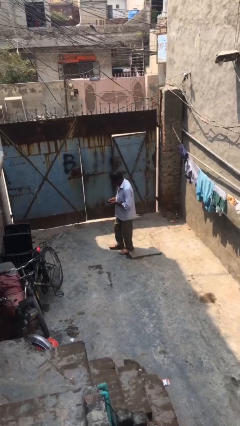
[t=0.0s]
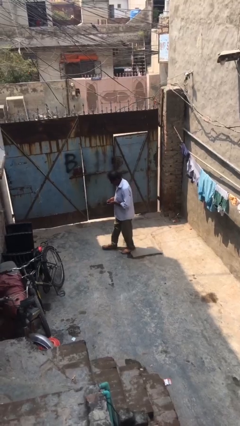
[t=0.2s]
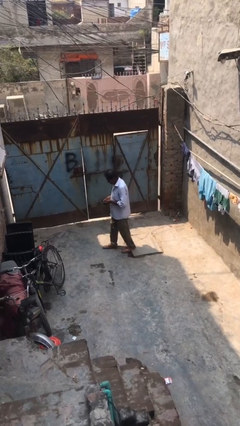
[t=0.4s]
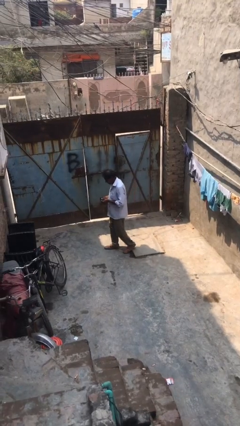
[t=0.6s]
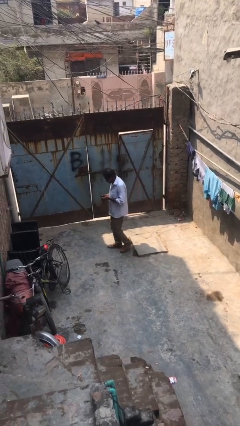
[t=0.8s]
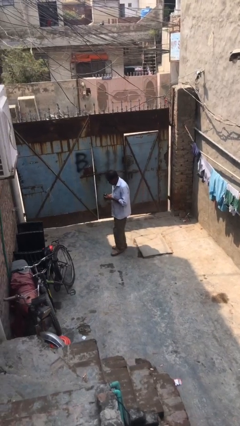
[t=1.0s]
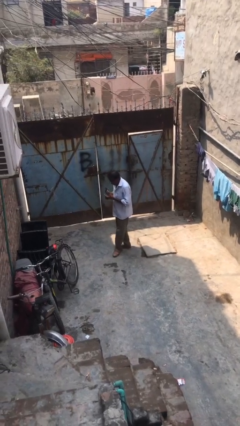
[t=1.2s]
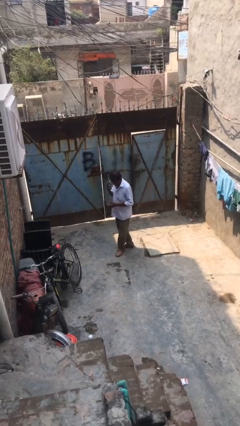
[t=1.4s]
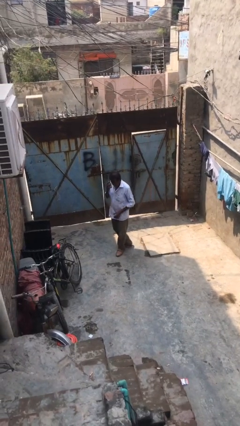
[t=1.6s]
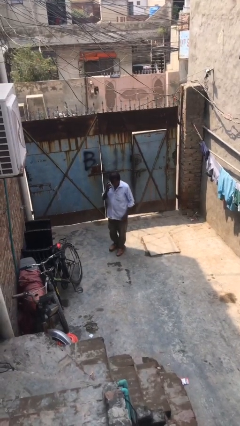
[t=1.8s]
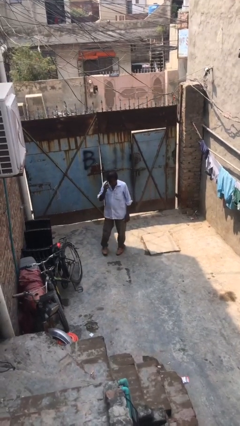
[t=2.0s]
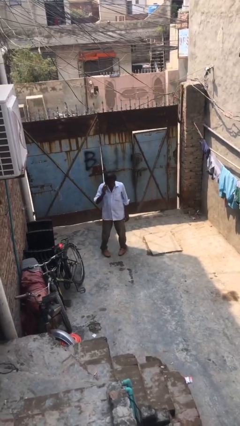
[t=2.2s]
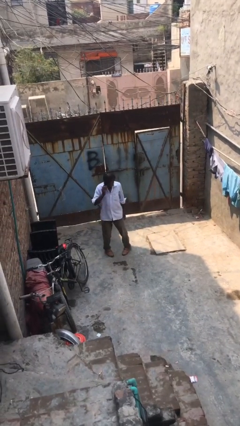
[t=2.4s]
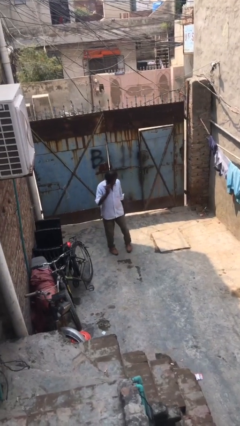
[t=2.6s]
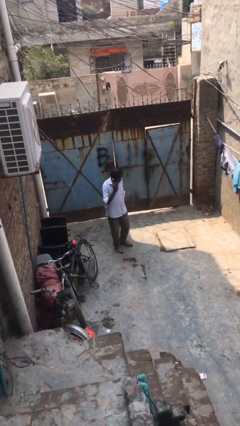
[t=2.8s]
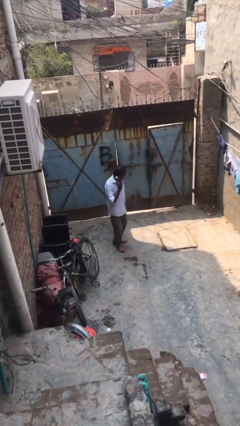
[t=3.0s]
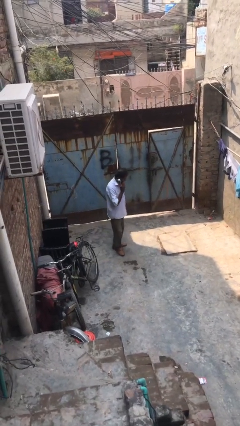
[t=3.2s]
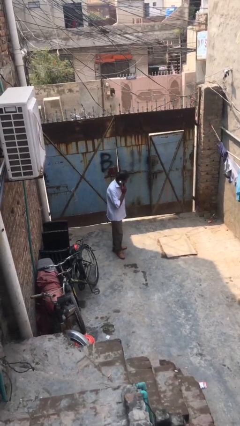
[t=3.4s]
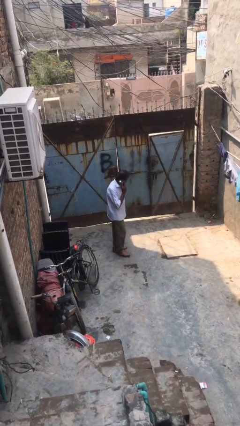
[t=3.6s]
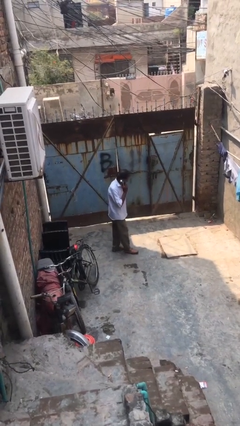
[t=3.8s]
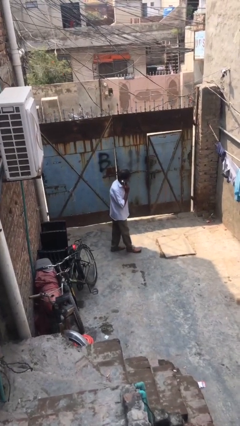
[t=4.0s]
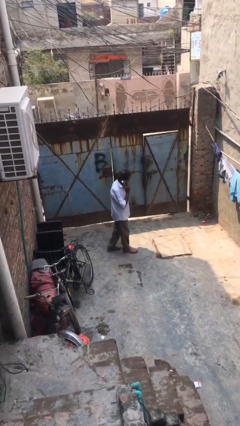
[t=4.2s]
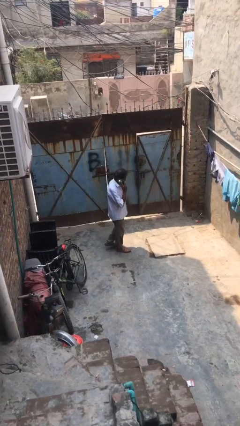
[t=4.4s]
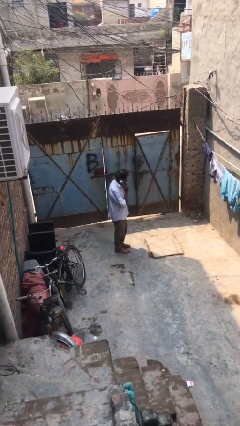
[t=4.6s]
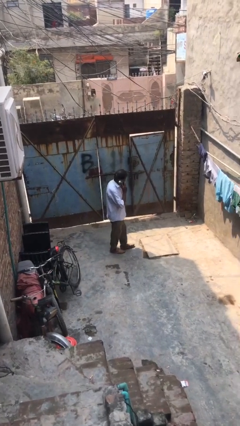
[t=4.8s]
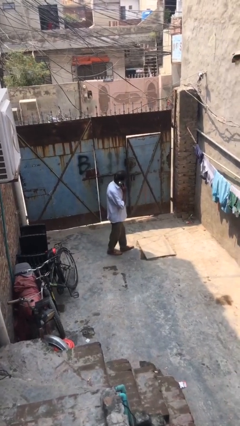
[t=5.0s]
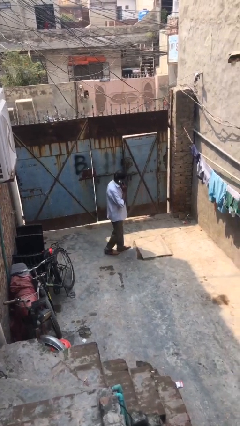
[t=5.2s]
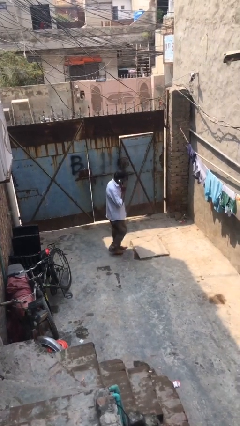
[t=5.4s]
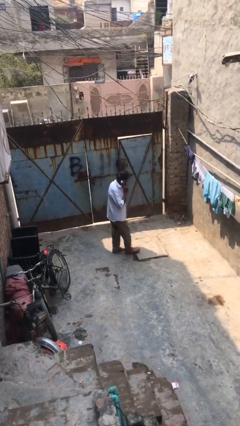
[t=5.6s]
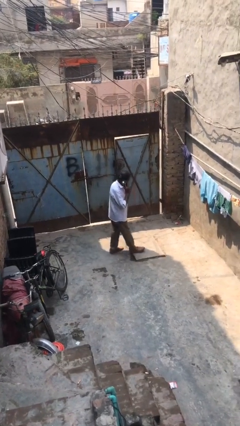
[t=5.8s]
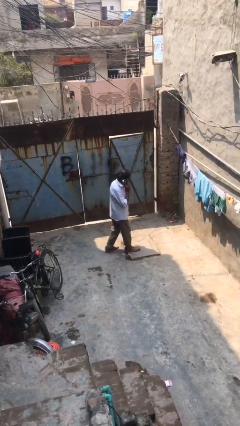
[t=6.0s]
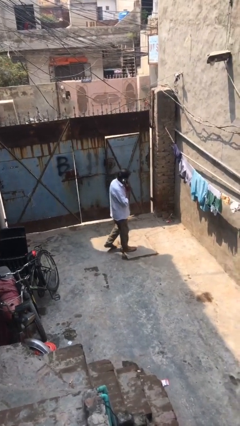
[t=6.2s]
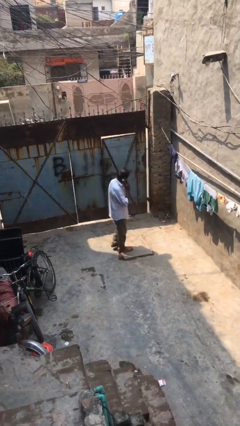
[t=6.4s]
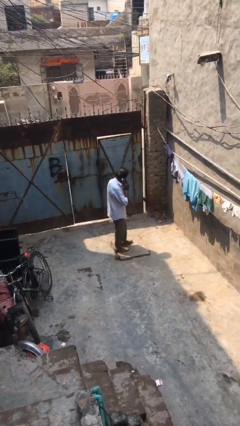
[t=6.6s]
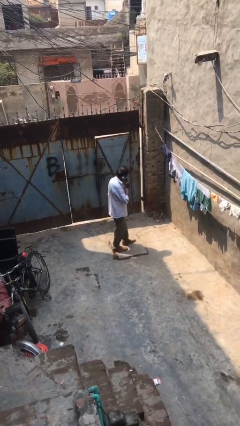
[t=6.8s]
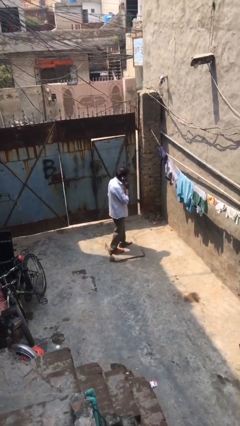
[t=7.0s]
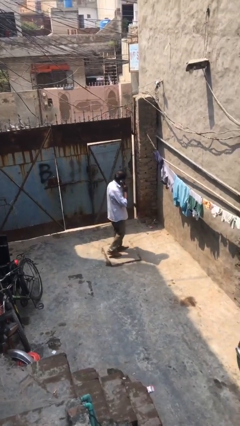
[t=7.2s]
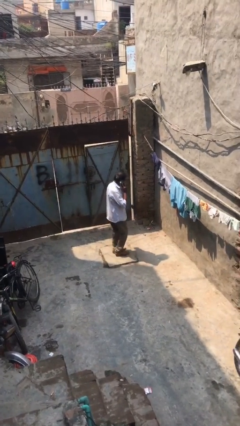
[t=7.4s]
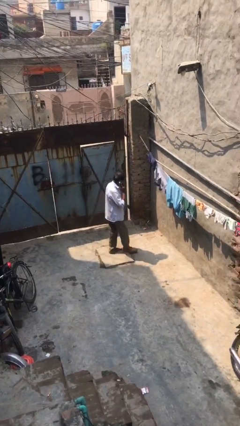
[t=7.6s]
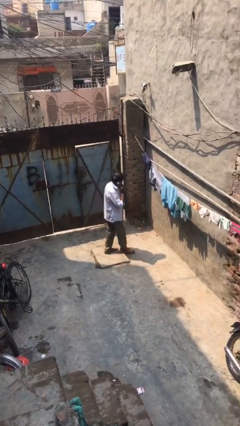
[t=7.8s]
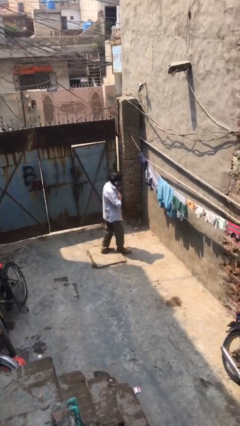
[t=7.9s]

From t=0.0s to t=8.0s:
person talks on phone

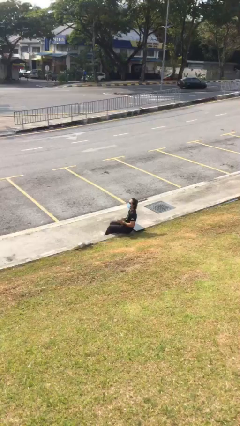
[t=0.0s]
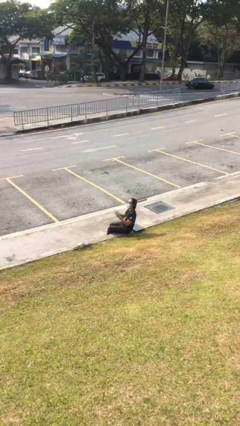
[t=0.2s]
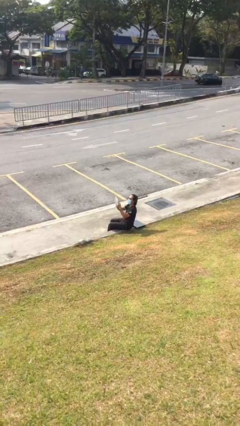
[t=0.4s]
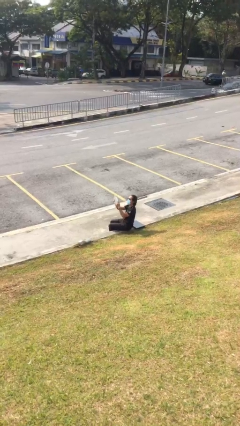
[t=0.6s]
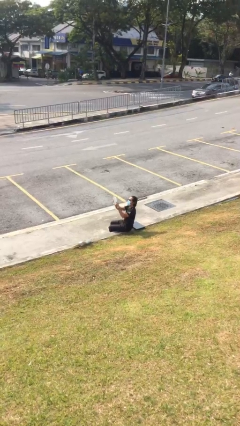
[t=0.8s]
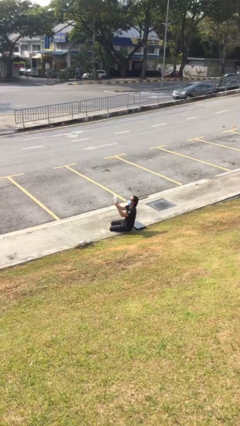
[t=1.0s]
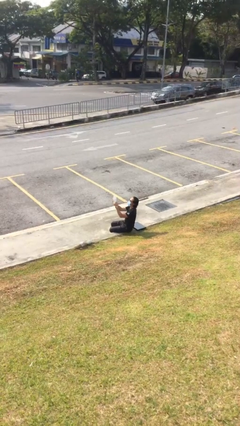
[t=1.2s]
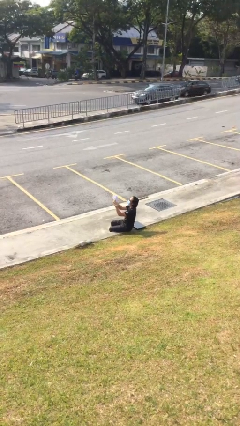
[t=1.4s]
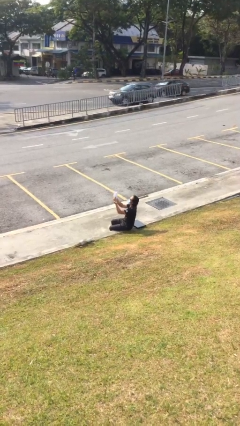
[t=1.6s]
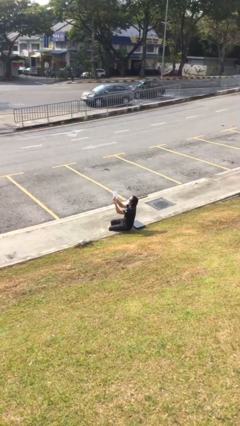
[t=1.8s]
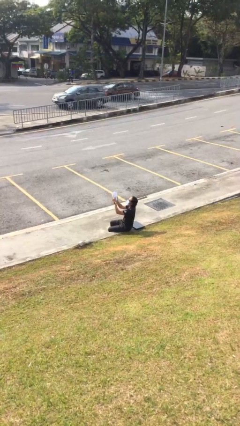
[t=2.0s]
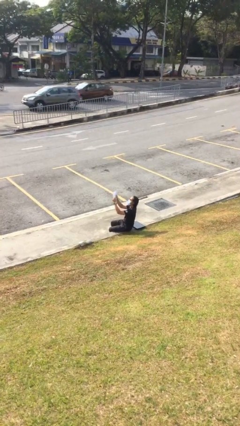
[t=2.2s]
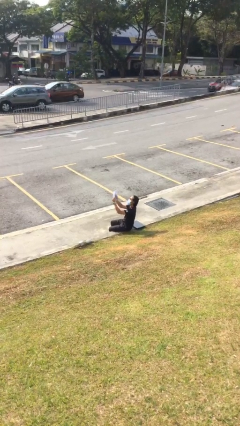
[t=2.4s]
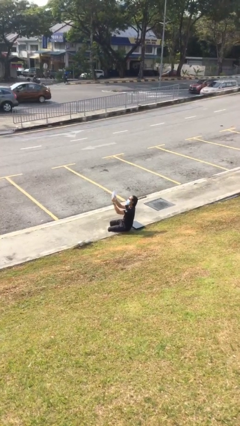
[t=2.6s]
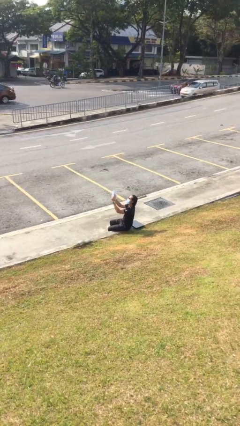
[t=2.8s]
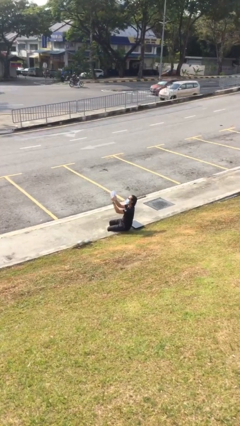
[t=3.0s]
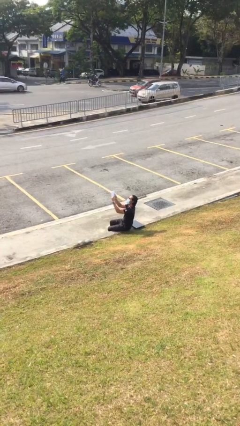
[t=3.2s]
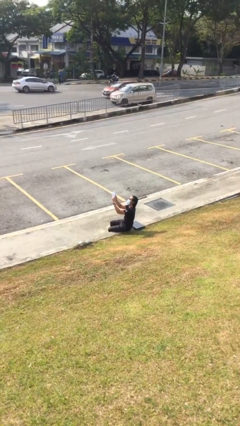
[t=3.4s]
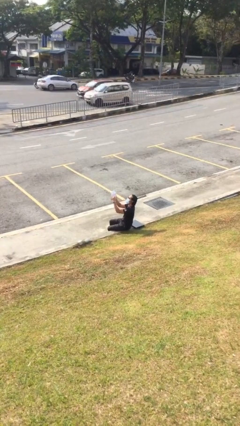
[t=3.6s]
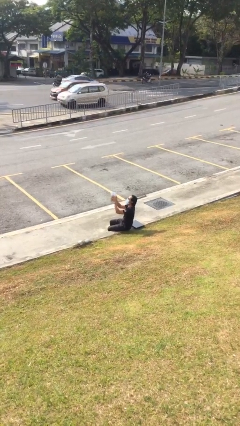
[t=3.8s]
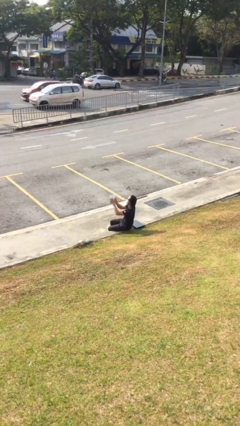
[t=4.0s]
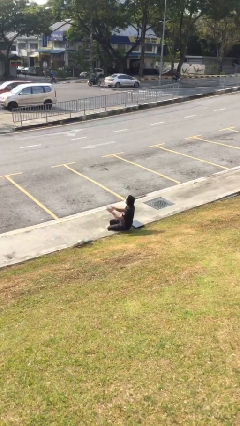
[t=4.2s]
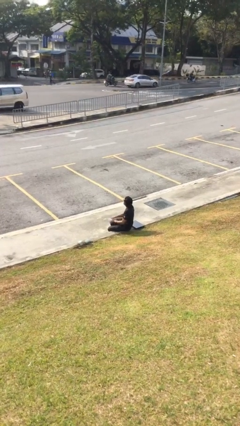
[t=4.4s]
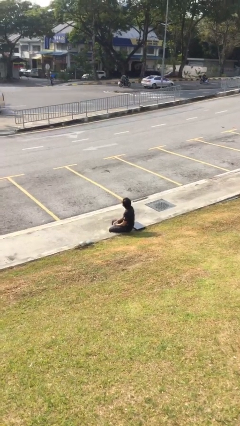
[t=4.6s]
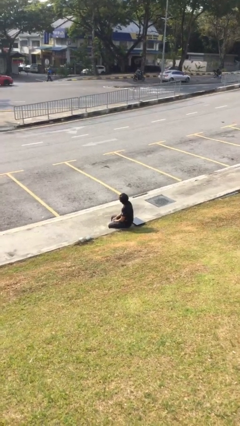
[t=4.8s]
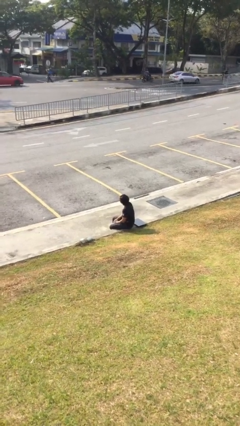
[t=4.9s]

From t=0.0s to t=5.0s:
person reads document

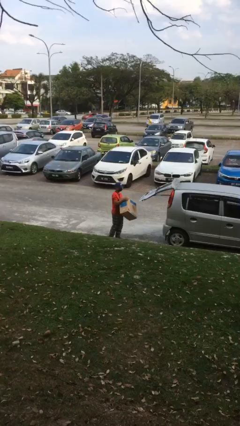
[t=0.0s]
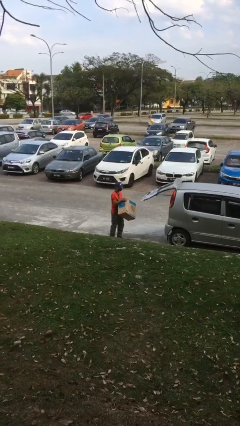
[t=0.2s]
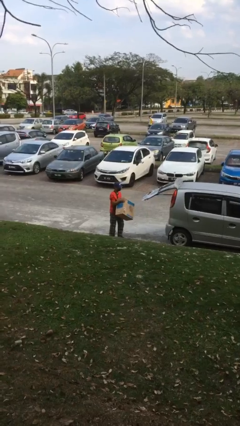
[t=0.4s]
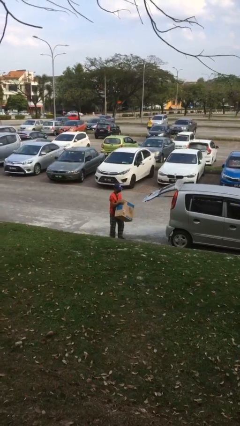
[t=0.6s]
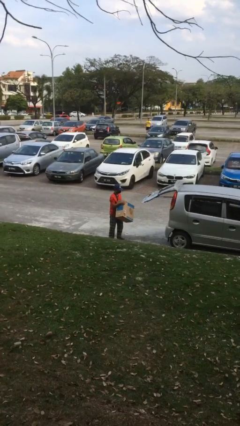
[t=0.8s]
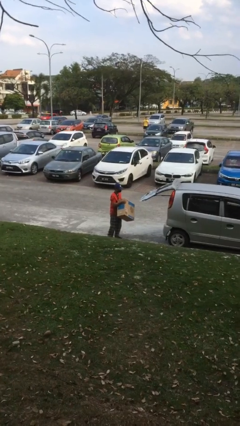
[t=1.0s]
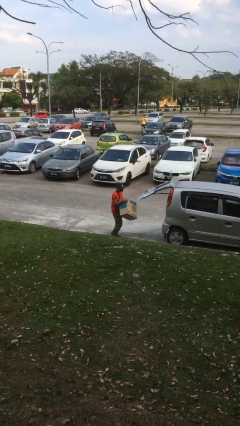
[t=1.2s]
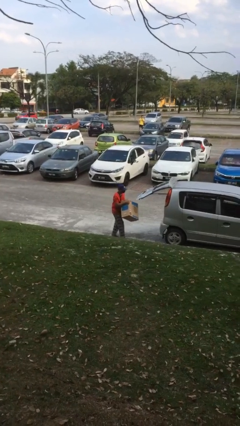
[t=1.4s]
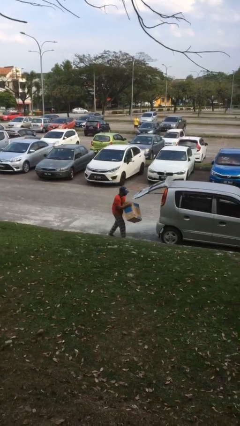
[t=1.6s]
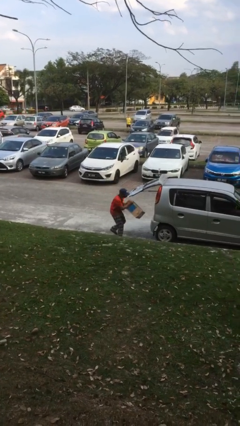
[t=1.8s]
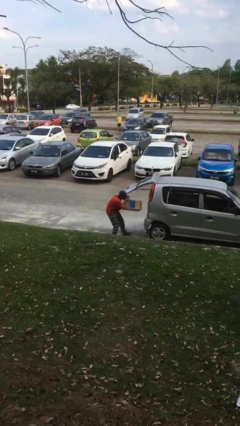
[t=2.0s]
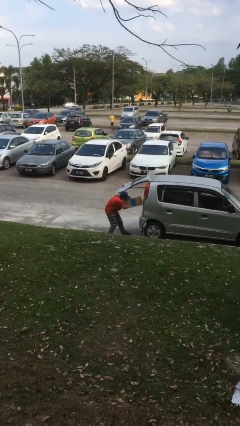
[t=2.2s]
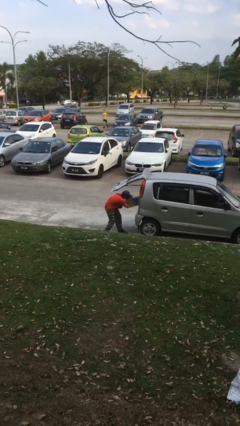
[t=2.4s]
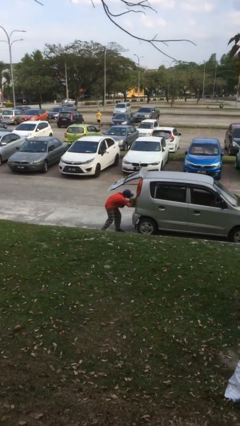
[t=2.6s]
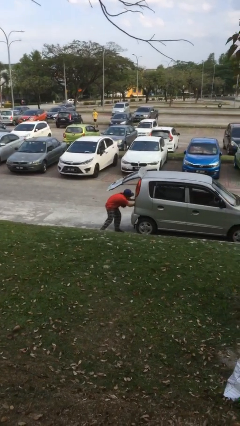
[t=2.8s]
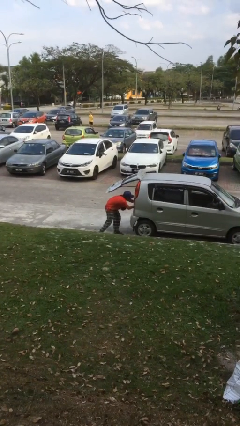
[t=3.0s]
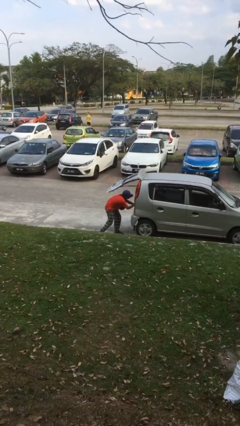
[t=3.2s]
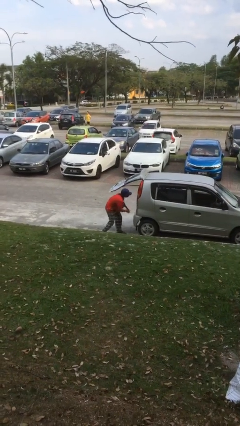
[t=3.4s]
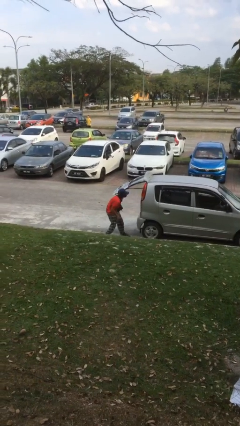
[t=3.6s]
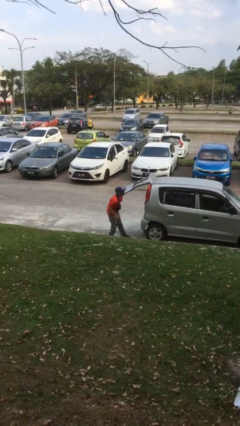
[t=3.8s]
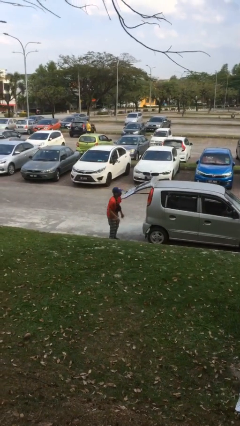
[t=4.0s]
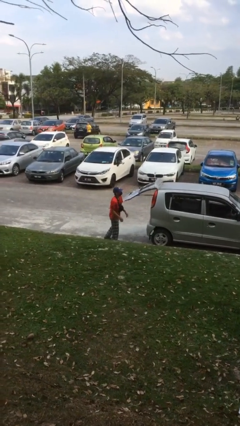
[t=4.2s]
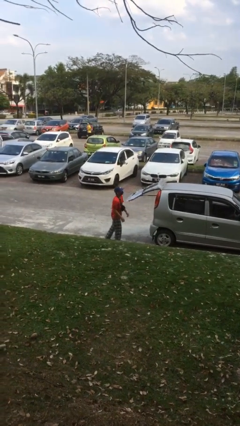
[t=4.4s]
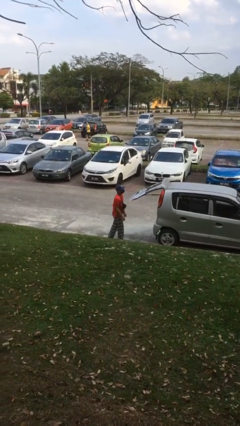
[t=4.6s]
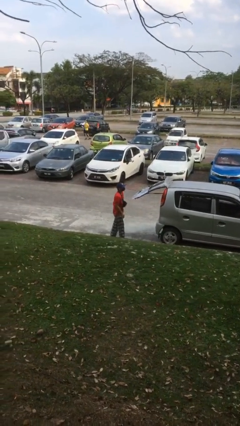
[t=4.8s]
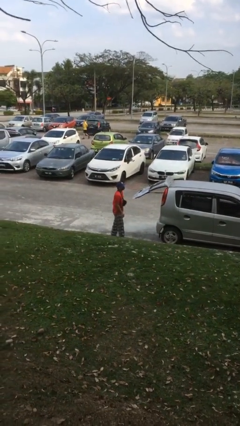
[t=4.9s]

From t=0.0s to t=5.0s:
person loads car
